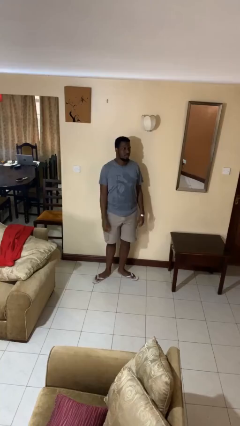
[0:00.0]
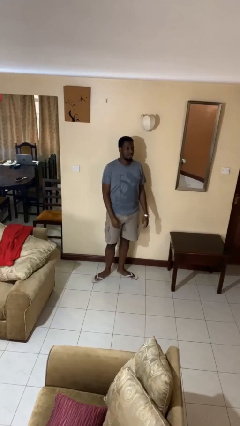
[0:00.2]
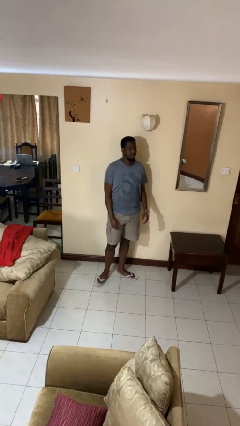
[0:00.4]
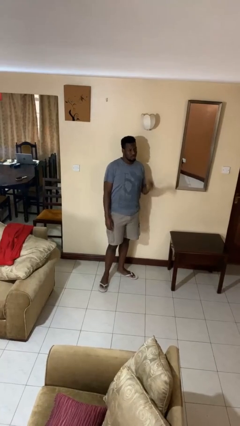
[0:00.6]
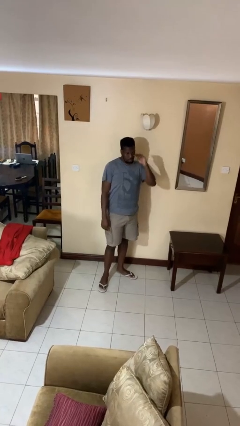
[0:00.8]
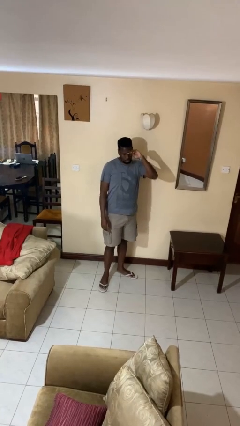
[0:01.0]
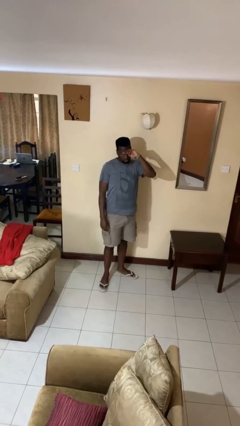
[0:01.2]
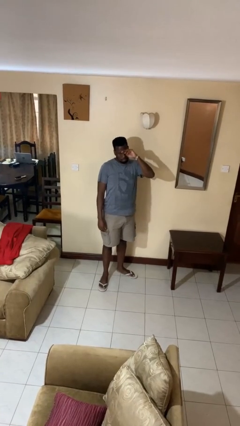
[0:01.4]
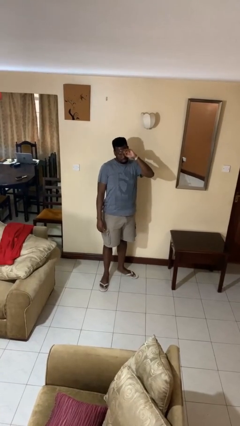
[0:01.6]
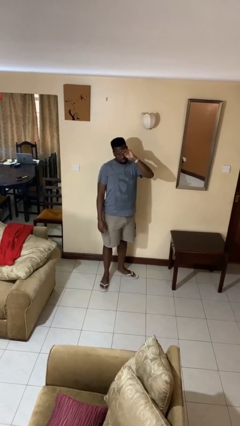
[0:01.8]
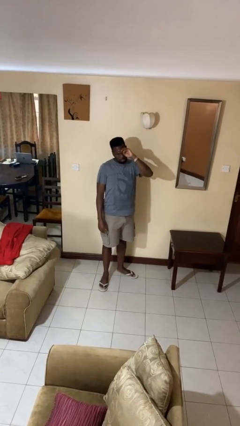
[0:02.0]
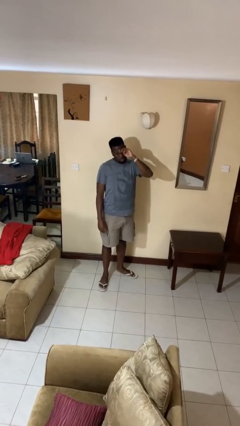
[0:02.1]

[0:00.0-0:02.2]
person rubs eyes

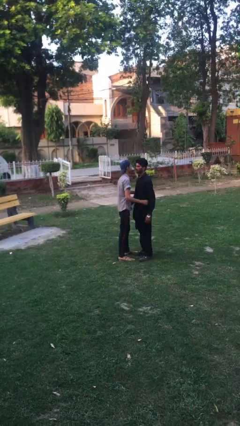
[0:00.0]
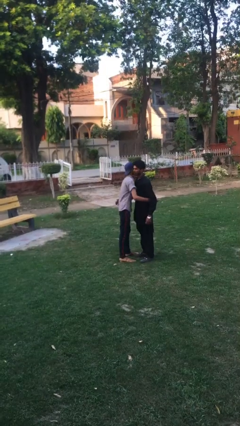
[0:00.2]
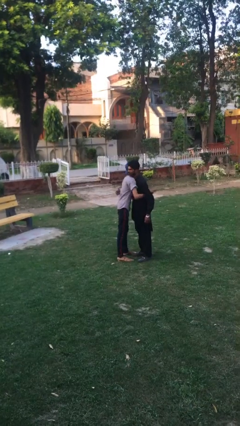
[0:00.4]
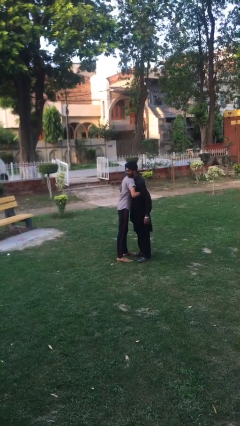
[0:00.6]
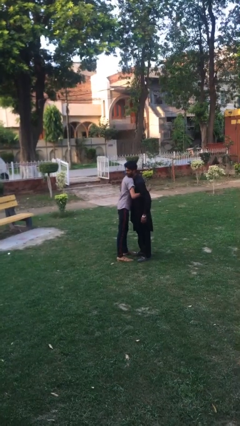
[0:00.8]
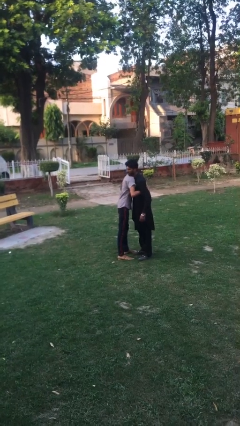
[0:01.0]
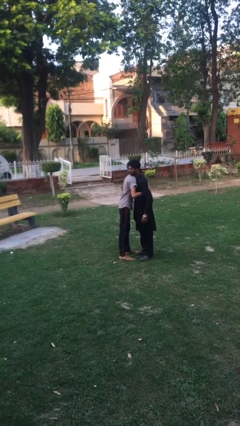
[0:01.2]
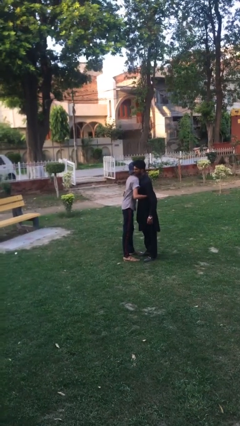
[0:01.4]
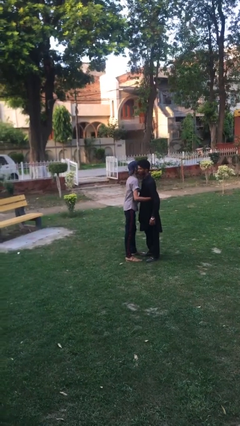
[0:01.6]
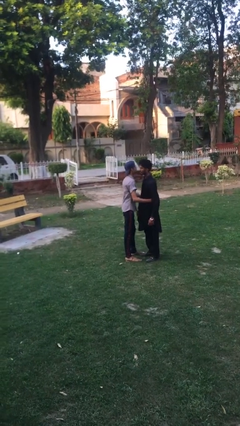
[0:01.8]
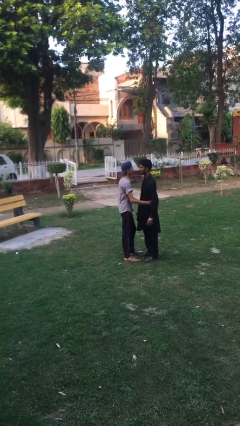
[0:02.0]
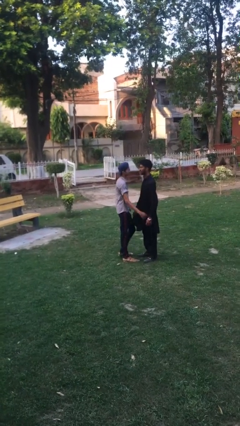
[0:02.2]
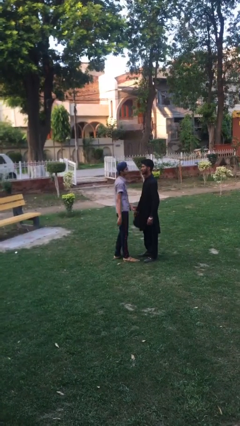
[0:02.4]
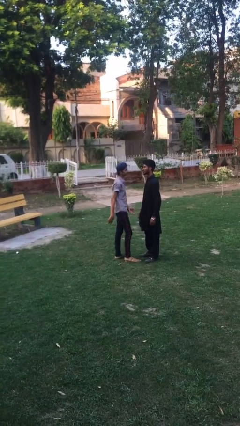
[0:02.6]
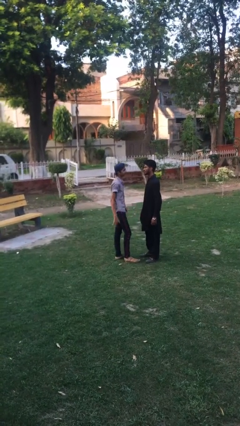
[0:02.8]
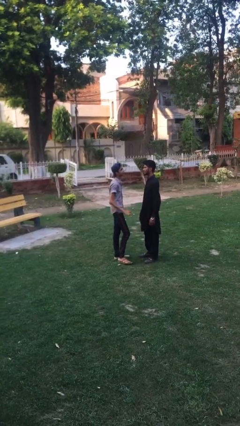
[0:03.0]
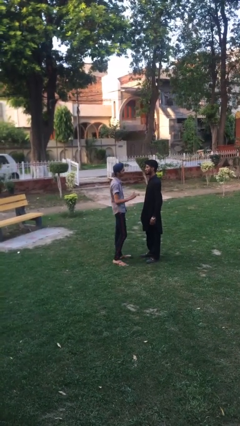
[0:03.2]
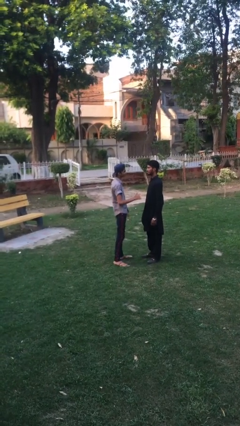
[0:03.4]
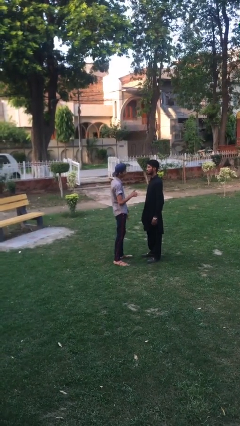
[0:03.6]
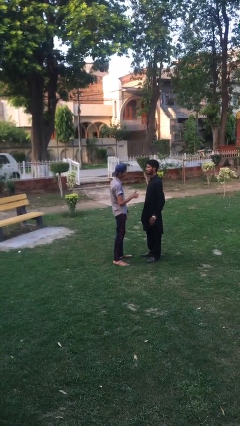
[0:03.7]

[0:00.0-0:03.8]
person embraces person

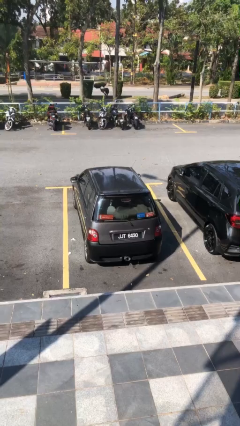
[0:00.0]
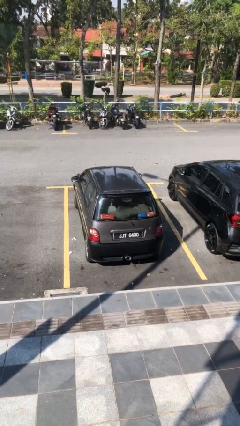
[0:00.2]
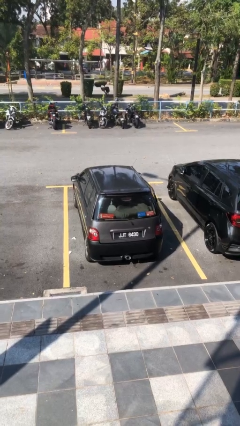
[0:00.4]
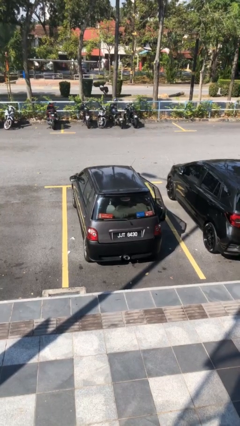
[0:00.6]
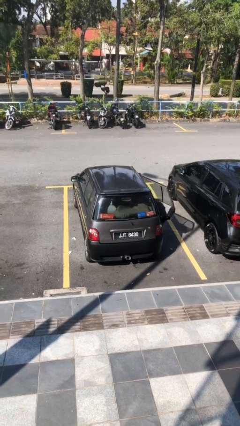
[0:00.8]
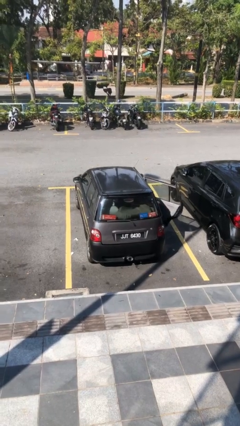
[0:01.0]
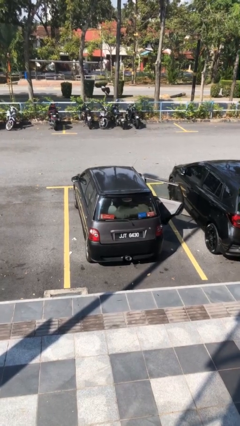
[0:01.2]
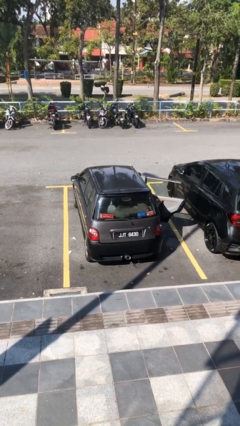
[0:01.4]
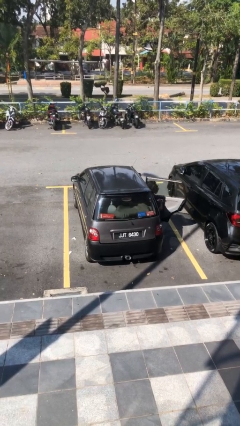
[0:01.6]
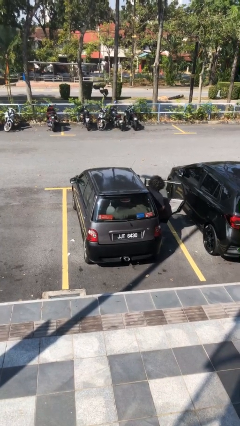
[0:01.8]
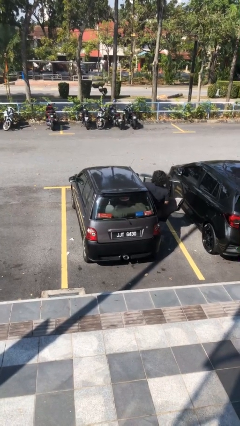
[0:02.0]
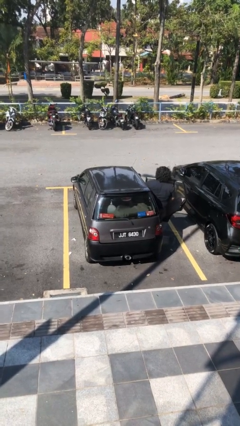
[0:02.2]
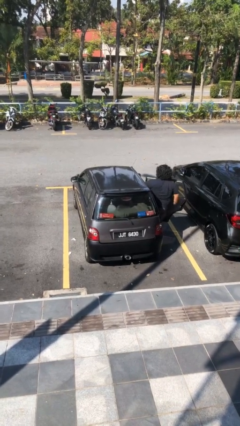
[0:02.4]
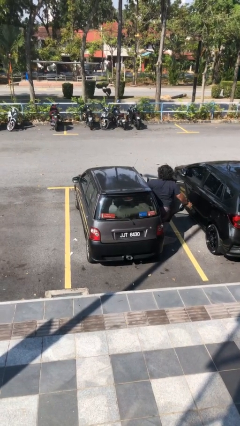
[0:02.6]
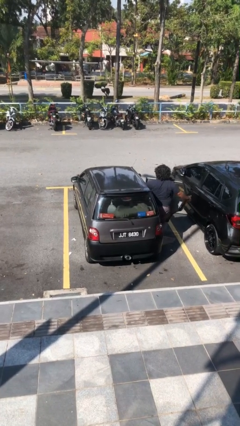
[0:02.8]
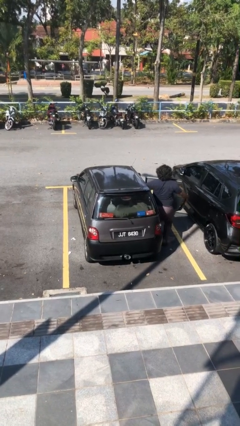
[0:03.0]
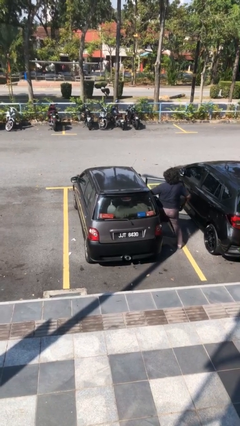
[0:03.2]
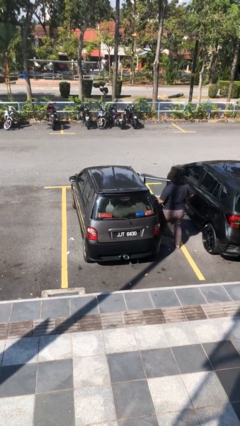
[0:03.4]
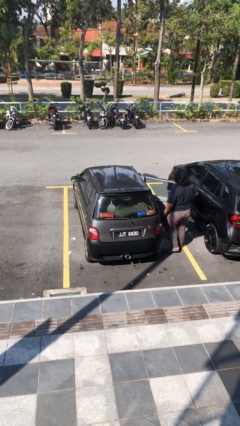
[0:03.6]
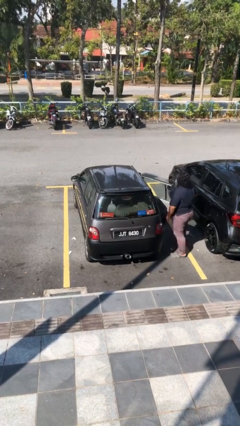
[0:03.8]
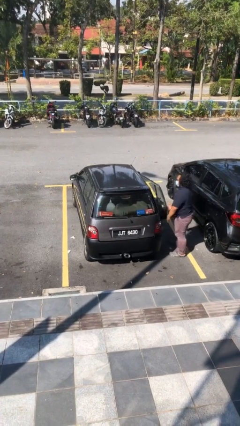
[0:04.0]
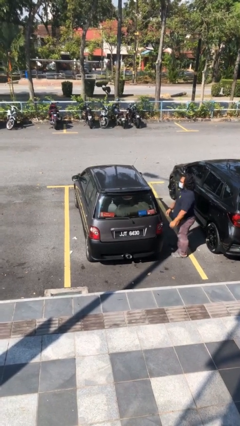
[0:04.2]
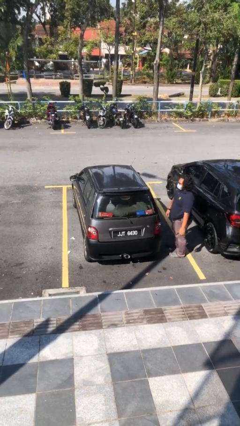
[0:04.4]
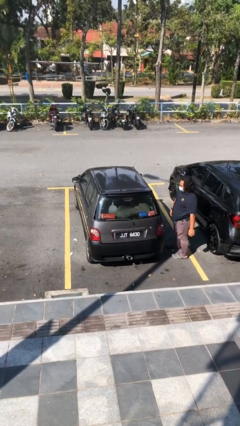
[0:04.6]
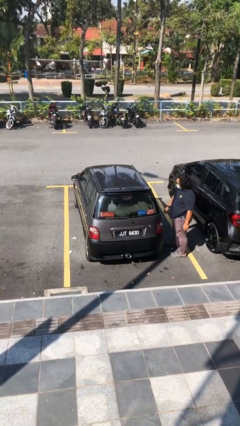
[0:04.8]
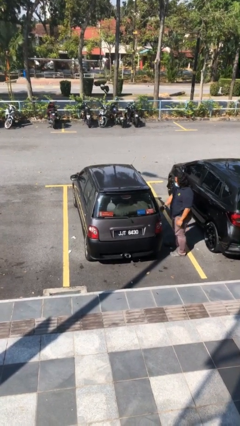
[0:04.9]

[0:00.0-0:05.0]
car drops off person

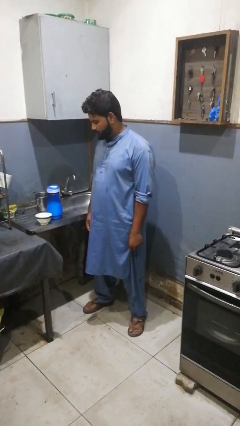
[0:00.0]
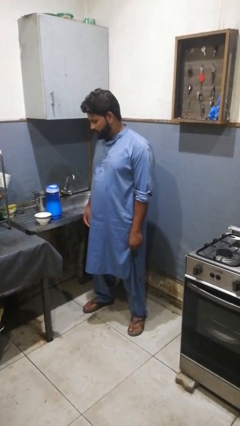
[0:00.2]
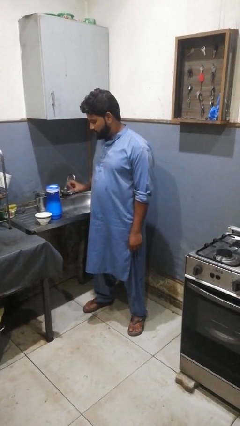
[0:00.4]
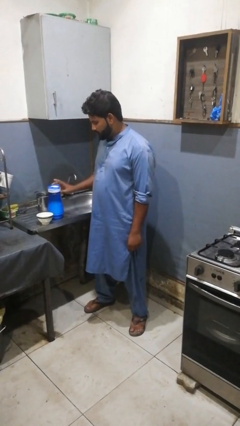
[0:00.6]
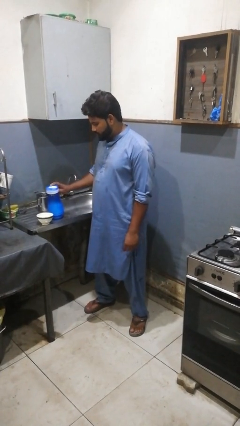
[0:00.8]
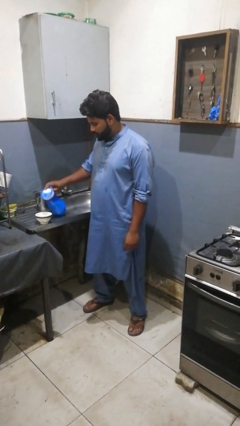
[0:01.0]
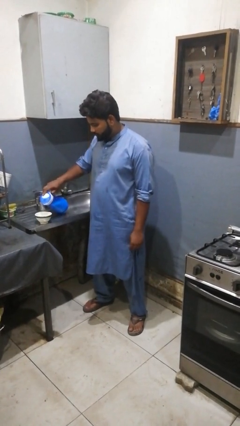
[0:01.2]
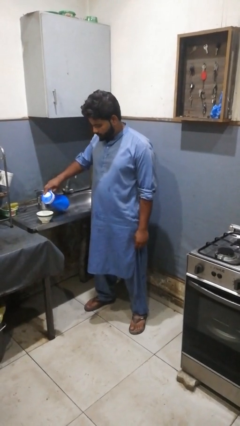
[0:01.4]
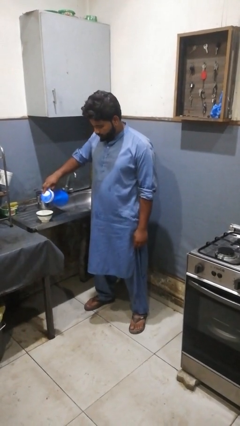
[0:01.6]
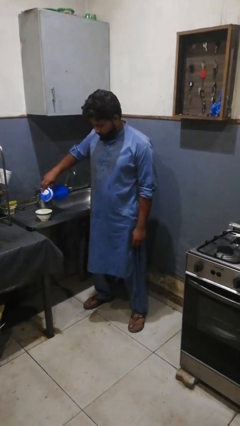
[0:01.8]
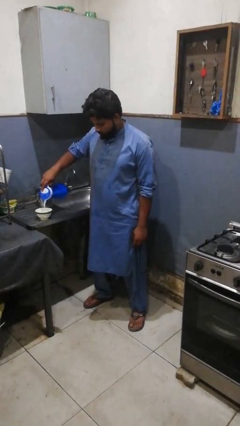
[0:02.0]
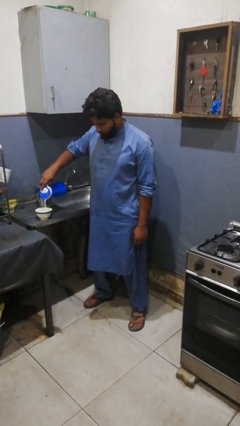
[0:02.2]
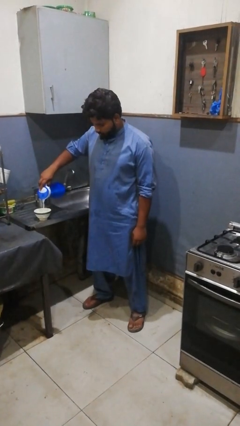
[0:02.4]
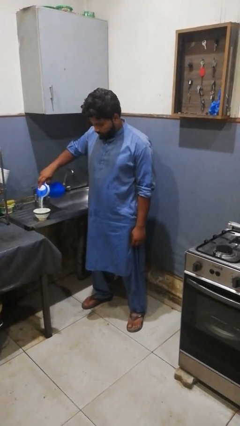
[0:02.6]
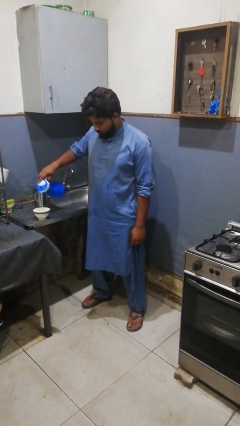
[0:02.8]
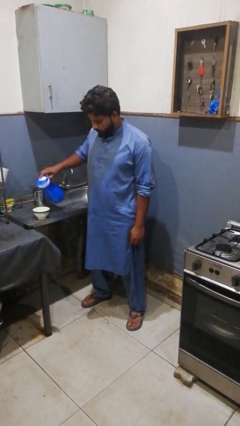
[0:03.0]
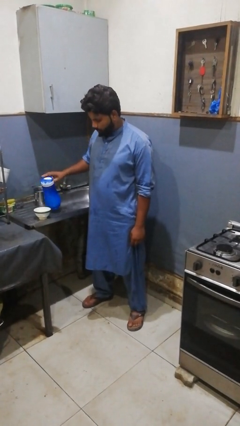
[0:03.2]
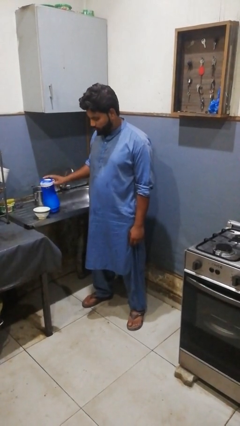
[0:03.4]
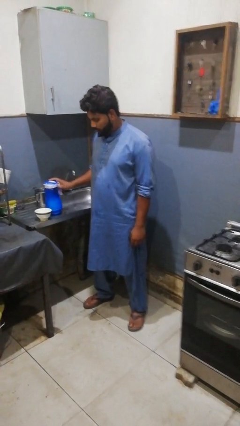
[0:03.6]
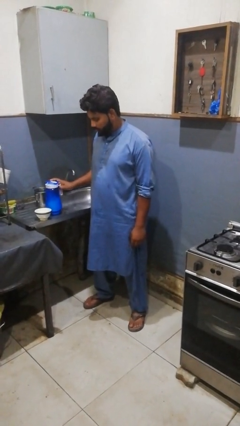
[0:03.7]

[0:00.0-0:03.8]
person pours into bowl

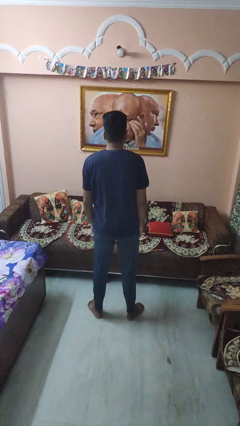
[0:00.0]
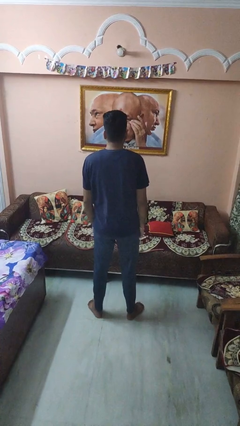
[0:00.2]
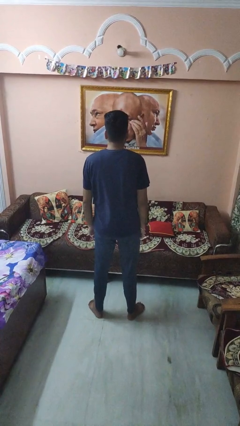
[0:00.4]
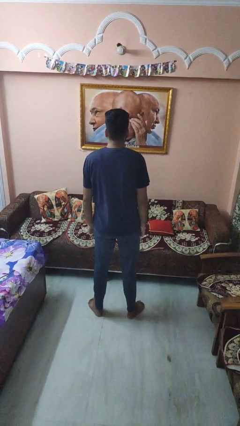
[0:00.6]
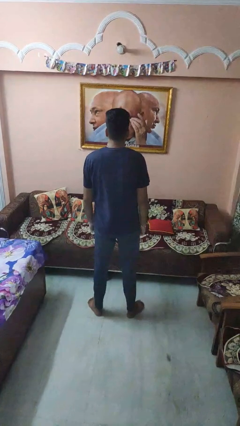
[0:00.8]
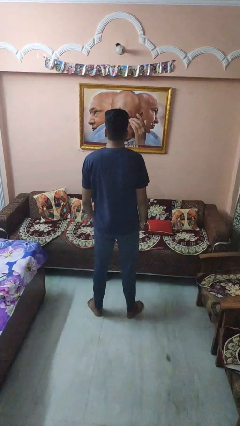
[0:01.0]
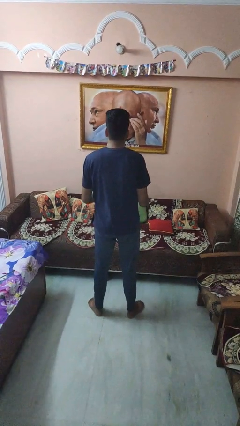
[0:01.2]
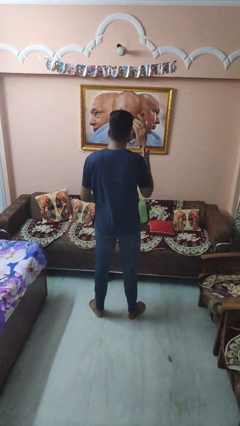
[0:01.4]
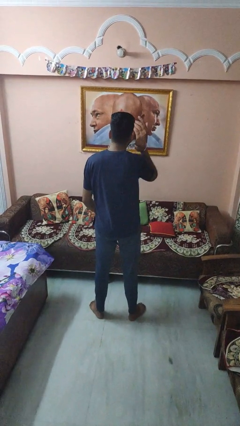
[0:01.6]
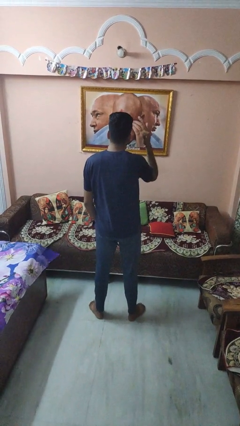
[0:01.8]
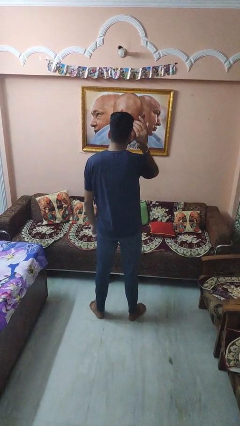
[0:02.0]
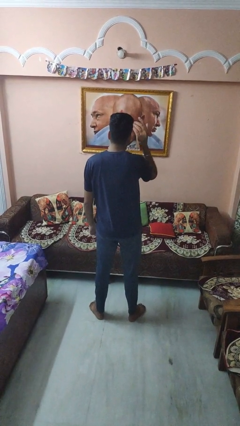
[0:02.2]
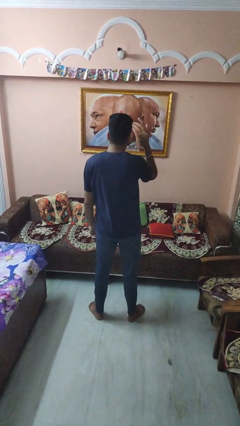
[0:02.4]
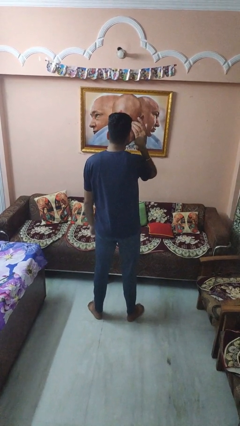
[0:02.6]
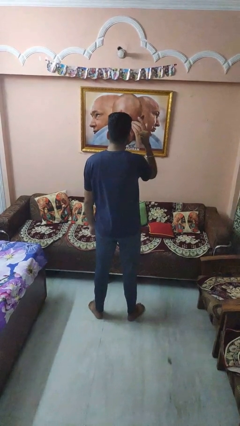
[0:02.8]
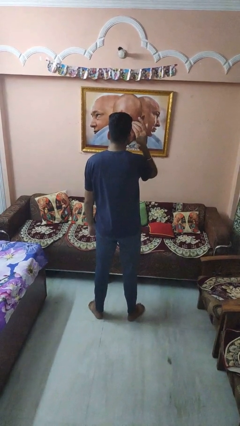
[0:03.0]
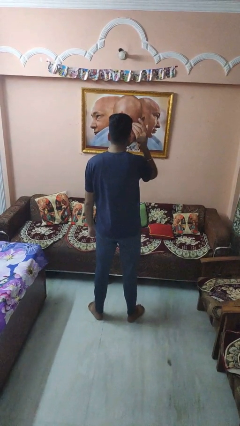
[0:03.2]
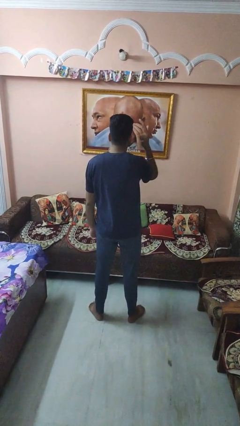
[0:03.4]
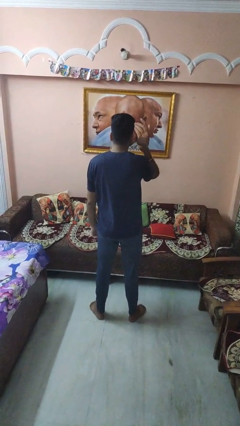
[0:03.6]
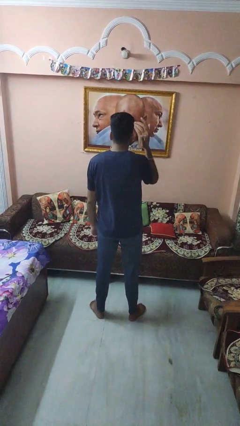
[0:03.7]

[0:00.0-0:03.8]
person gestures behind me
